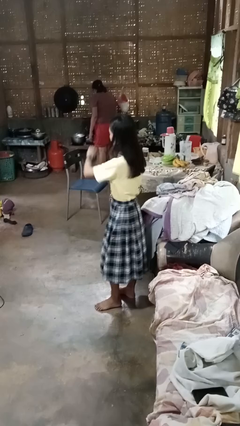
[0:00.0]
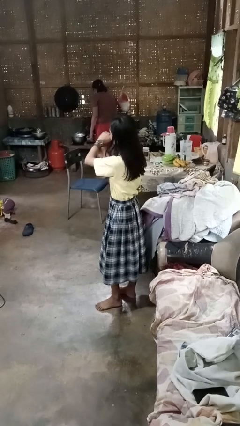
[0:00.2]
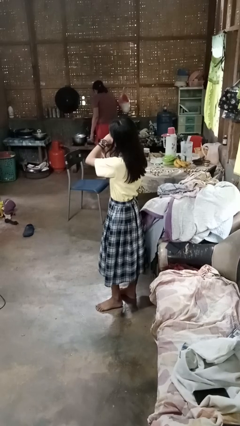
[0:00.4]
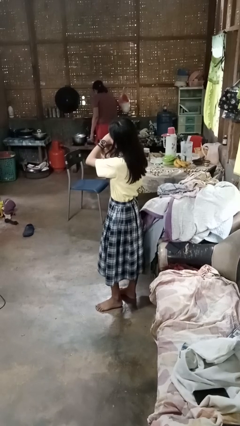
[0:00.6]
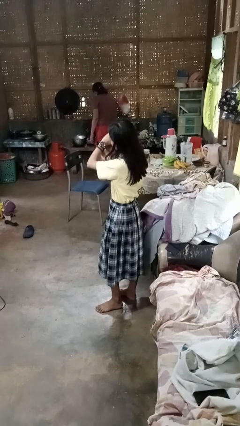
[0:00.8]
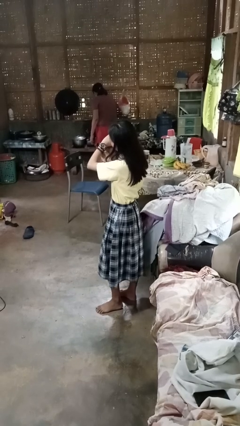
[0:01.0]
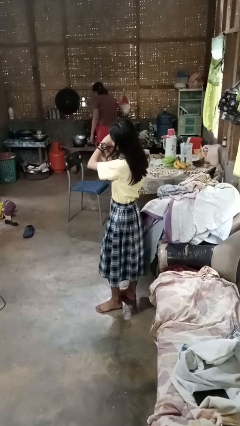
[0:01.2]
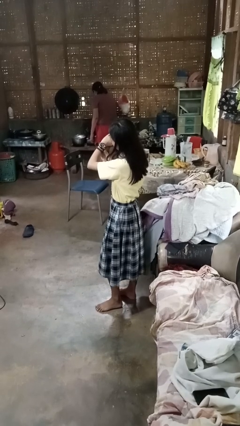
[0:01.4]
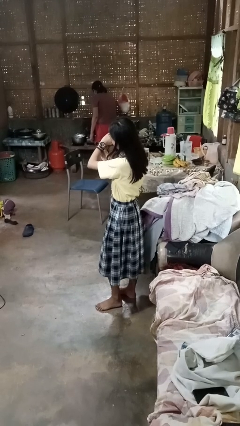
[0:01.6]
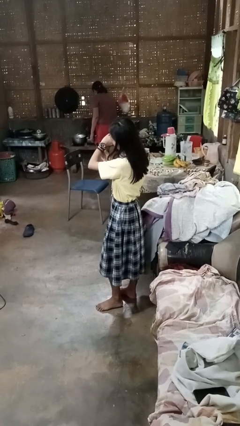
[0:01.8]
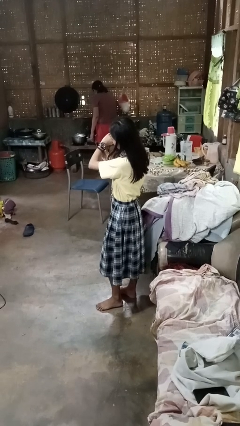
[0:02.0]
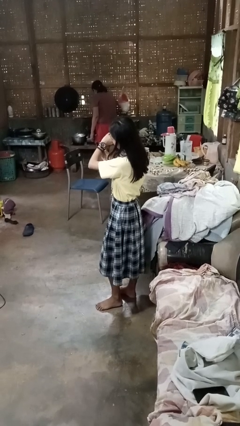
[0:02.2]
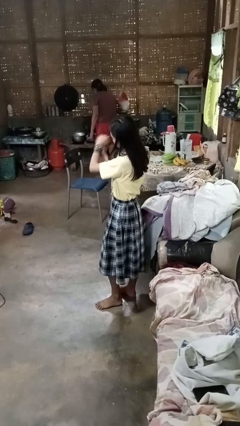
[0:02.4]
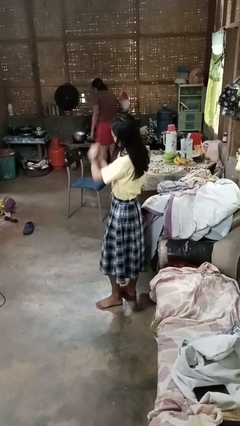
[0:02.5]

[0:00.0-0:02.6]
person looks at wristwatch

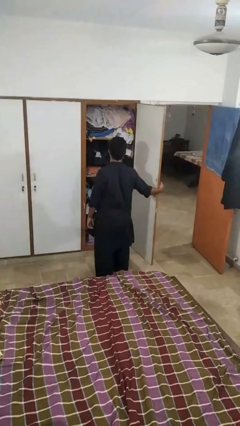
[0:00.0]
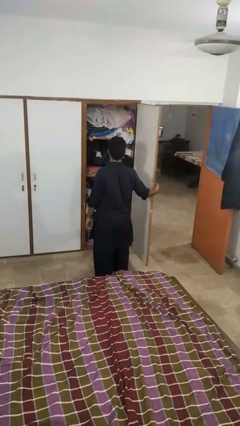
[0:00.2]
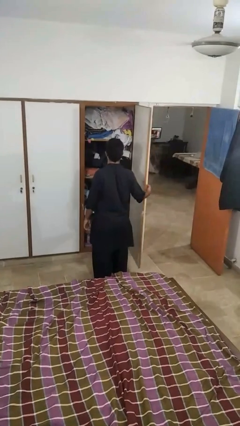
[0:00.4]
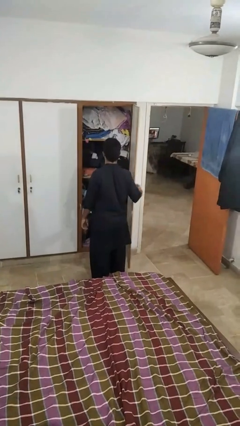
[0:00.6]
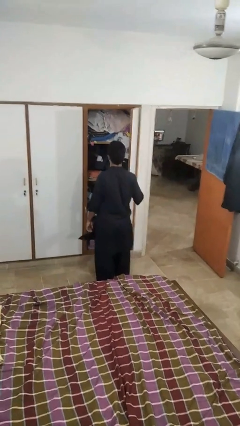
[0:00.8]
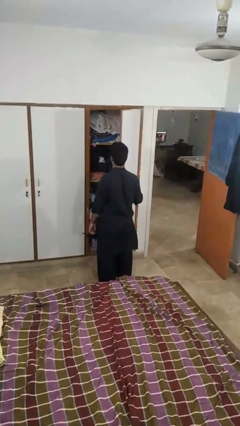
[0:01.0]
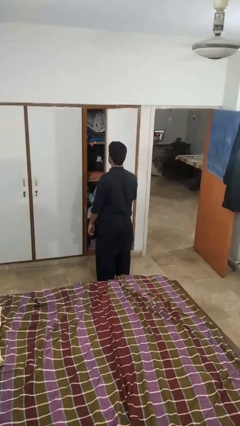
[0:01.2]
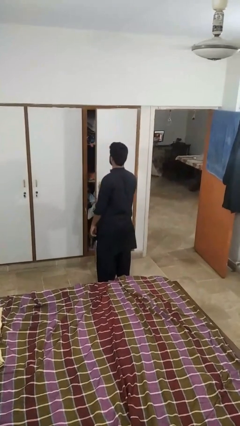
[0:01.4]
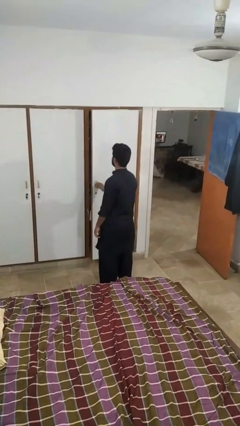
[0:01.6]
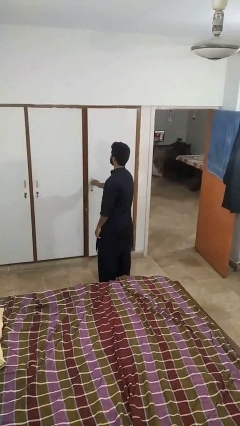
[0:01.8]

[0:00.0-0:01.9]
person closes closet door

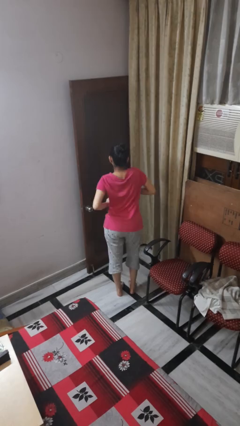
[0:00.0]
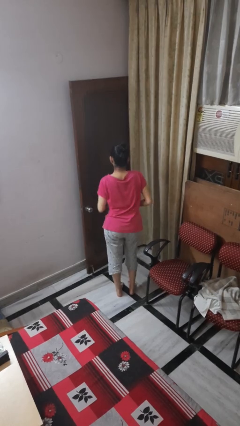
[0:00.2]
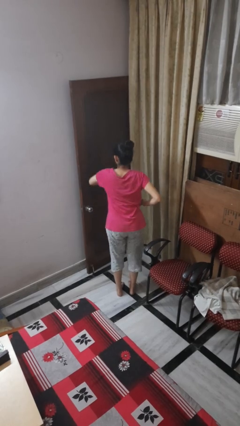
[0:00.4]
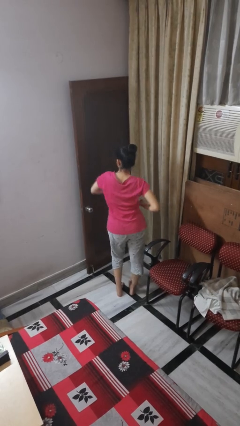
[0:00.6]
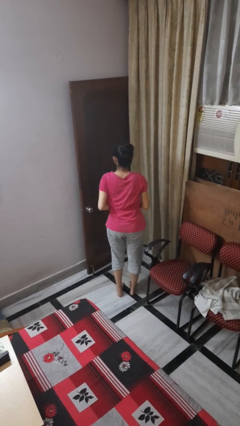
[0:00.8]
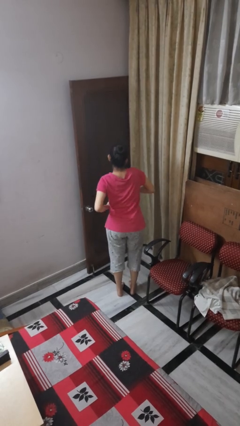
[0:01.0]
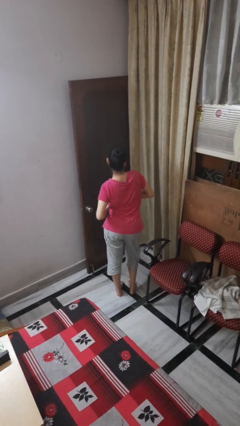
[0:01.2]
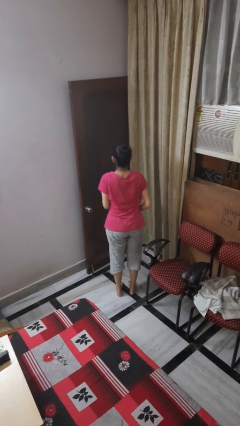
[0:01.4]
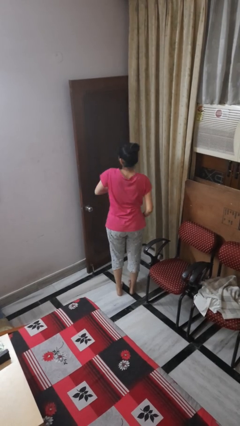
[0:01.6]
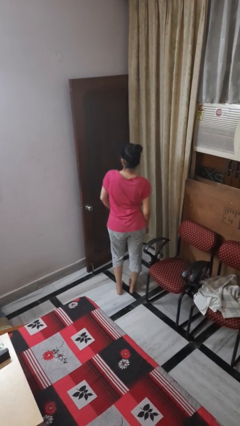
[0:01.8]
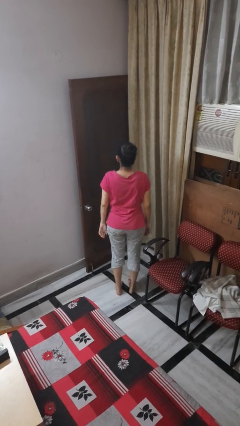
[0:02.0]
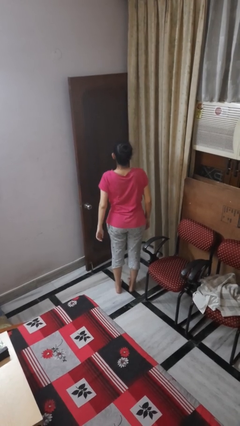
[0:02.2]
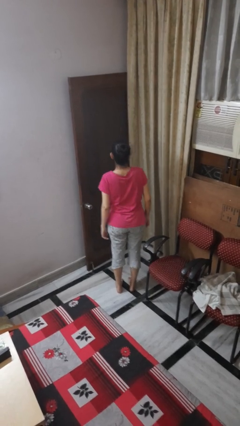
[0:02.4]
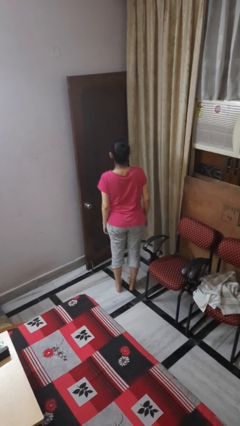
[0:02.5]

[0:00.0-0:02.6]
person dances in place

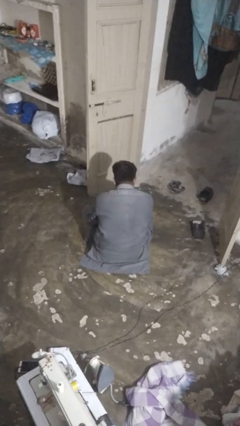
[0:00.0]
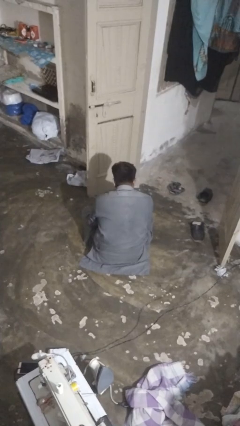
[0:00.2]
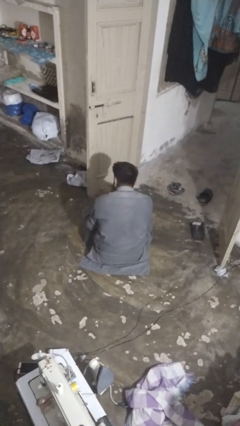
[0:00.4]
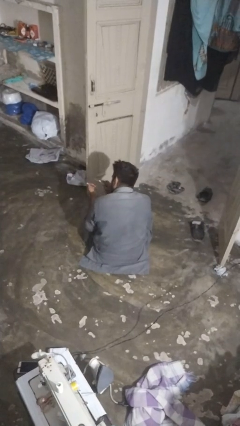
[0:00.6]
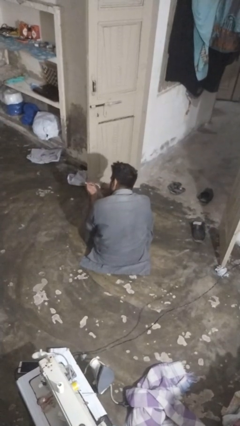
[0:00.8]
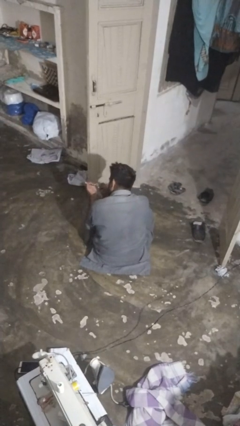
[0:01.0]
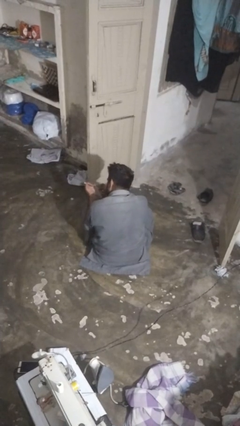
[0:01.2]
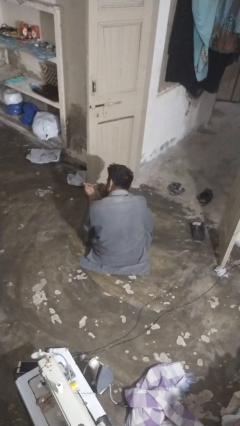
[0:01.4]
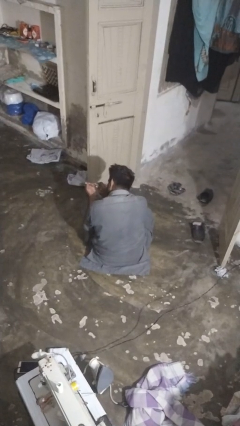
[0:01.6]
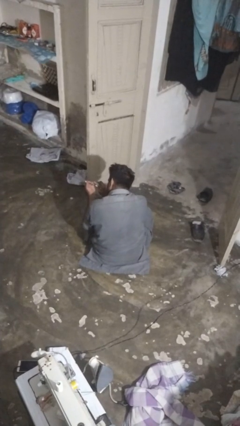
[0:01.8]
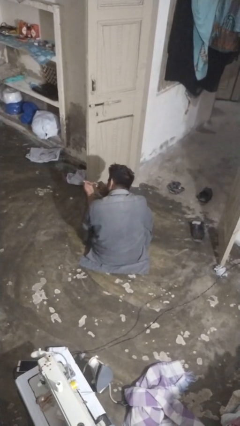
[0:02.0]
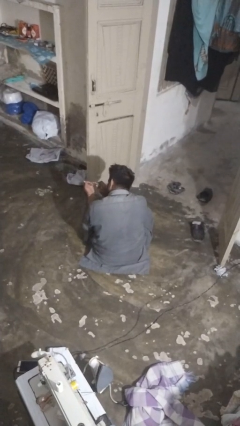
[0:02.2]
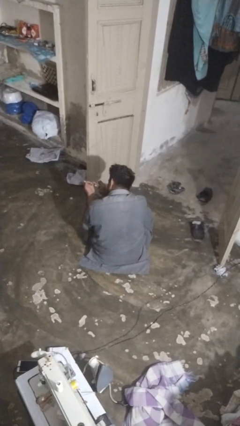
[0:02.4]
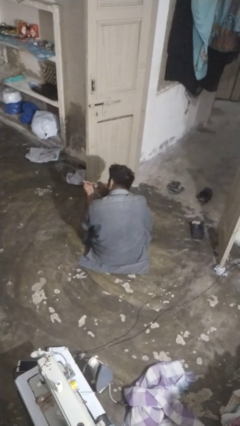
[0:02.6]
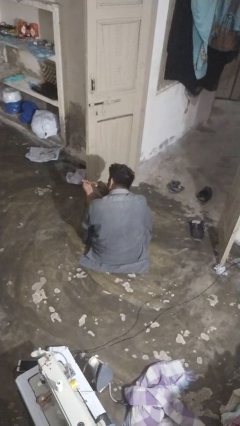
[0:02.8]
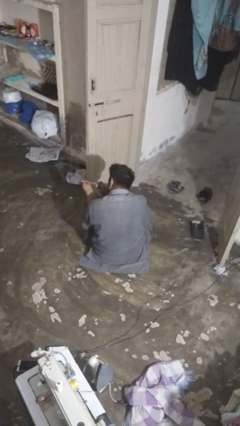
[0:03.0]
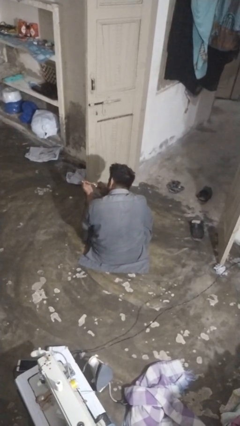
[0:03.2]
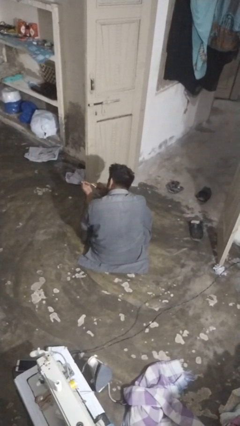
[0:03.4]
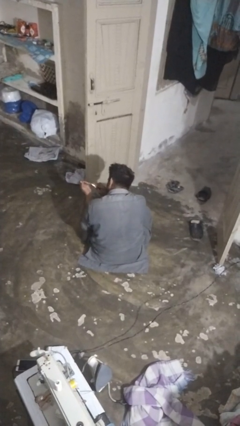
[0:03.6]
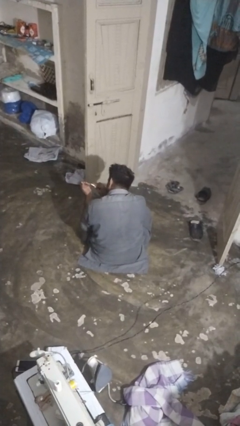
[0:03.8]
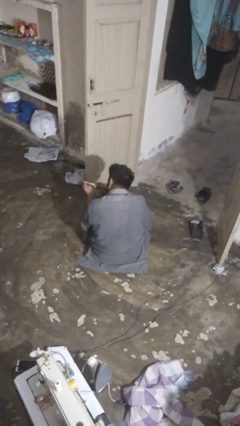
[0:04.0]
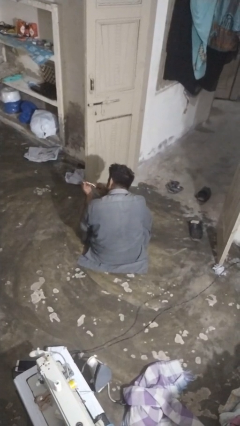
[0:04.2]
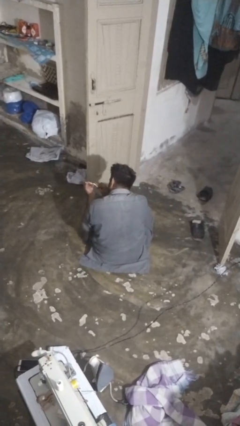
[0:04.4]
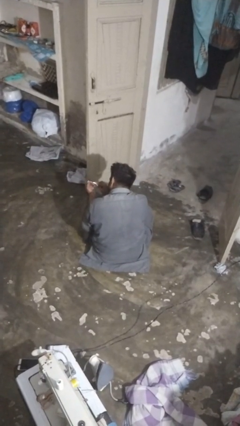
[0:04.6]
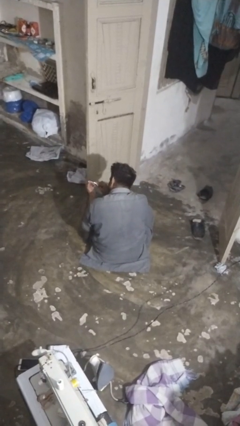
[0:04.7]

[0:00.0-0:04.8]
person files fingernails

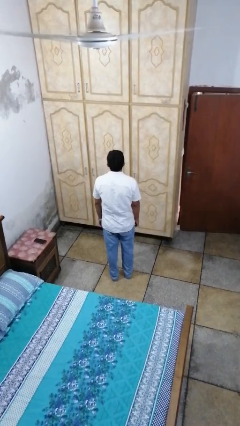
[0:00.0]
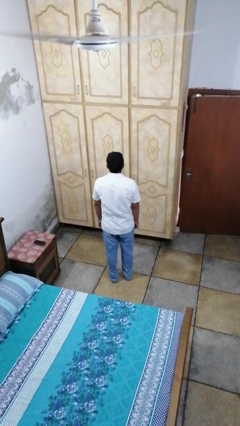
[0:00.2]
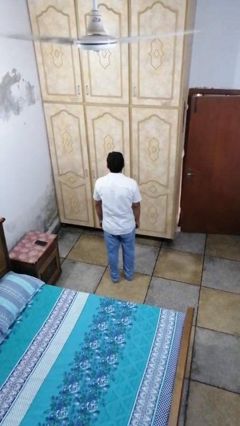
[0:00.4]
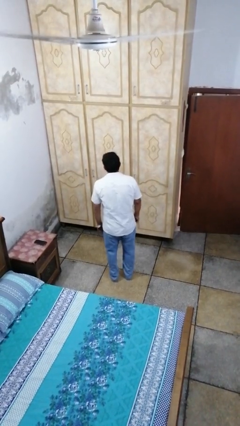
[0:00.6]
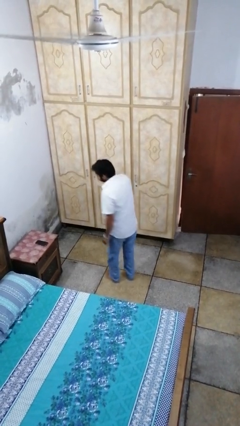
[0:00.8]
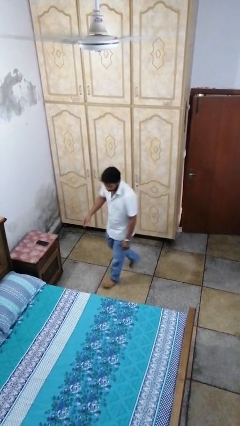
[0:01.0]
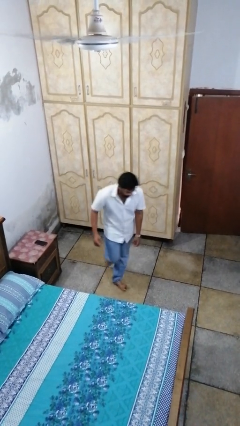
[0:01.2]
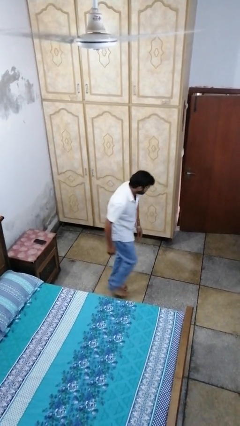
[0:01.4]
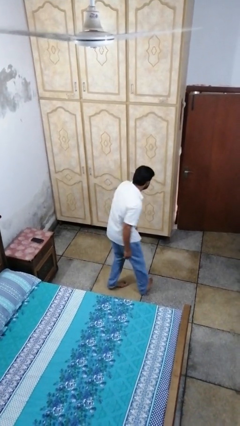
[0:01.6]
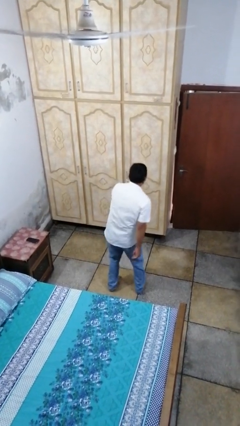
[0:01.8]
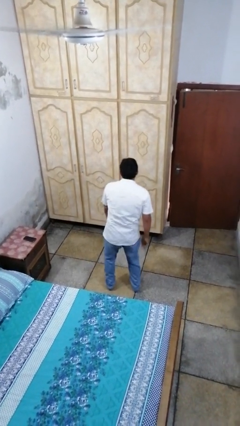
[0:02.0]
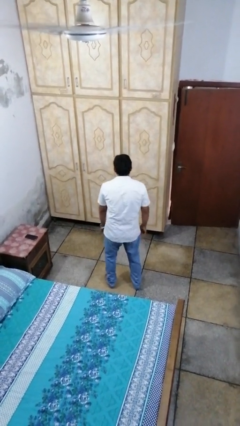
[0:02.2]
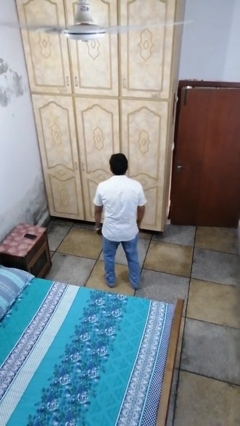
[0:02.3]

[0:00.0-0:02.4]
person twirls

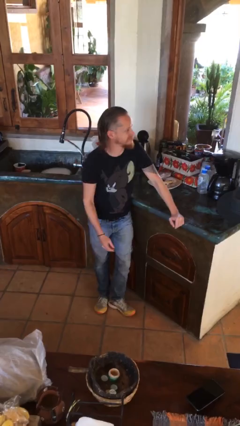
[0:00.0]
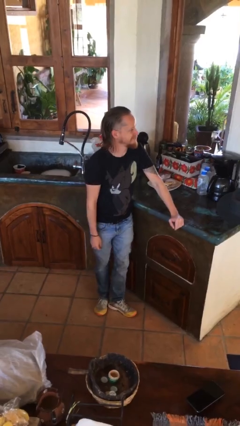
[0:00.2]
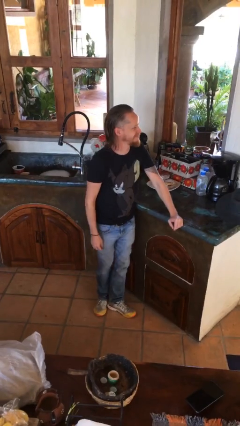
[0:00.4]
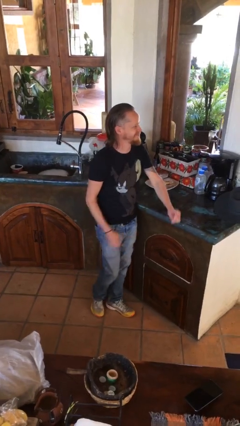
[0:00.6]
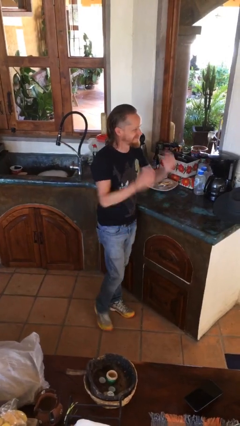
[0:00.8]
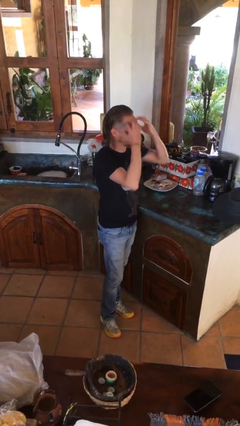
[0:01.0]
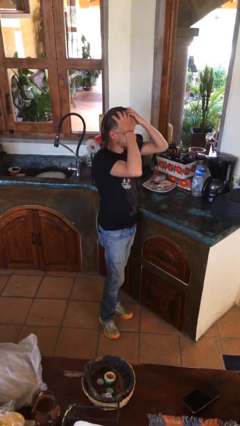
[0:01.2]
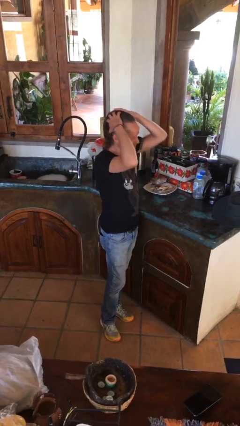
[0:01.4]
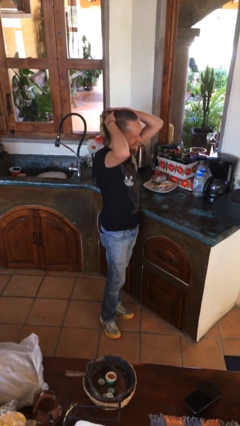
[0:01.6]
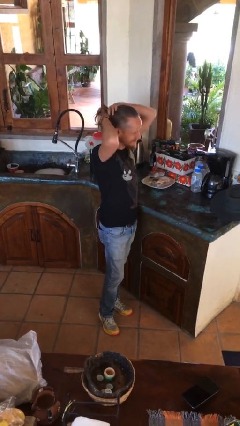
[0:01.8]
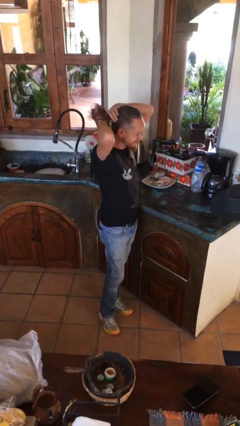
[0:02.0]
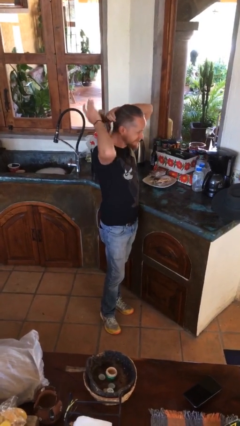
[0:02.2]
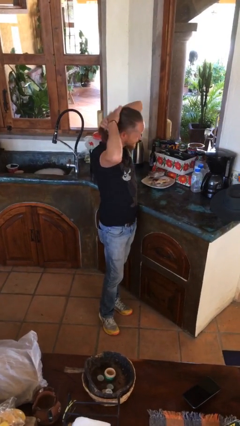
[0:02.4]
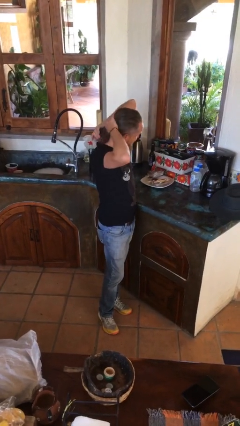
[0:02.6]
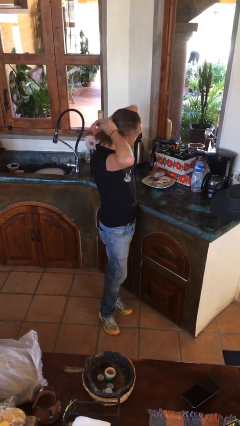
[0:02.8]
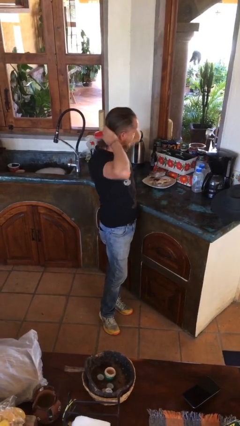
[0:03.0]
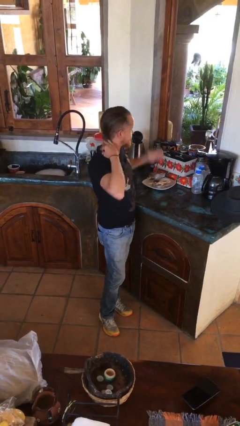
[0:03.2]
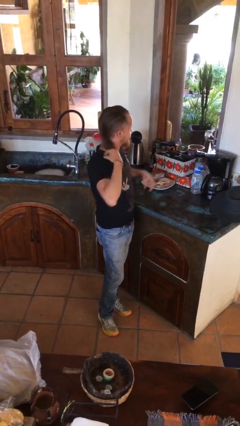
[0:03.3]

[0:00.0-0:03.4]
person strokes hair
